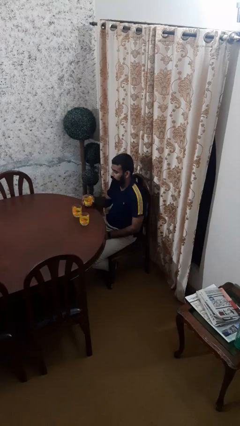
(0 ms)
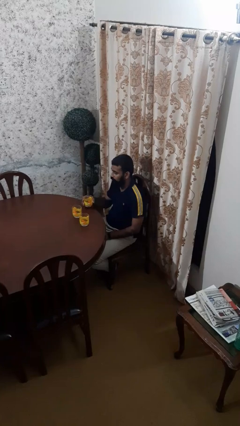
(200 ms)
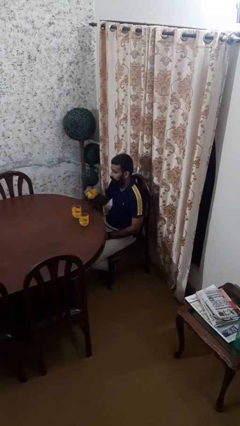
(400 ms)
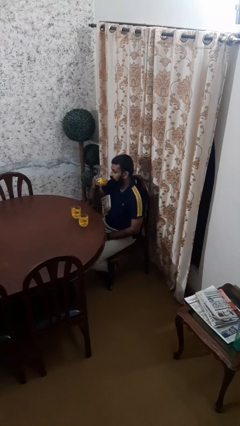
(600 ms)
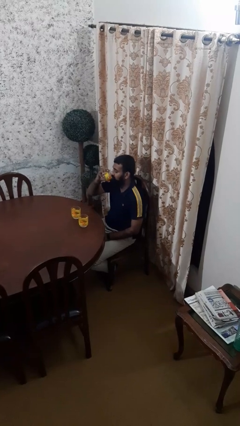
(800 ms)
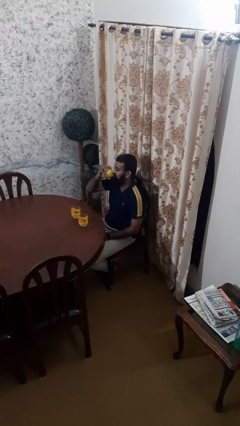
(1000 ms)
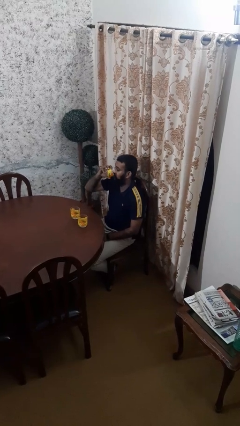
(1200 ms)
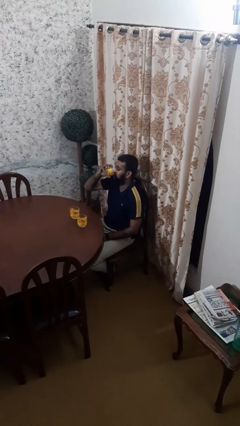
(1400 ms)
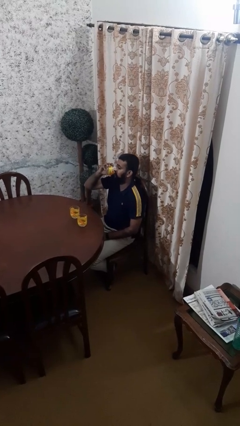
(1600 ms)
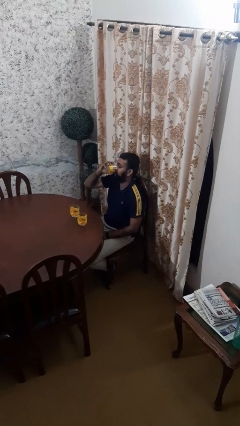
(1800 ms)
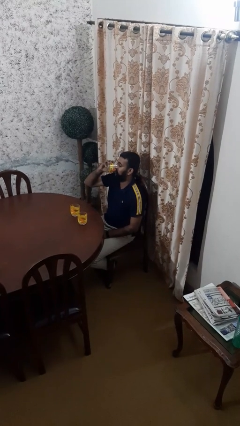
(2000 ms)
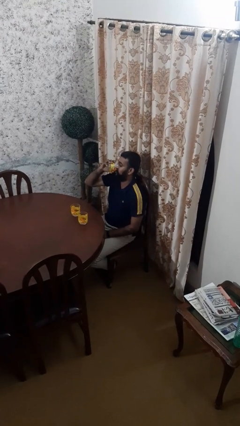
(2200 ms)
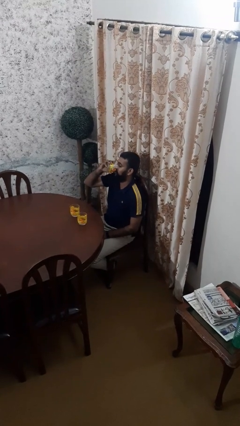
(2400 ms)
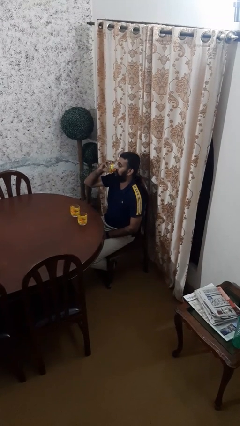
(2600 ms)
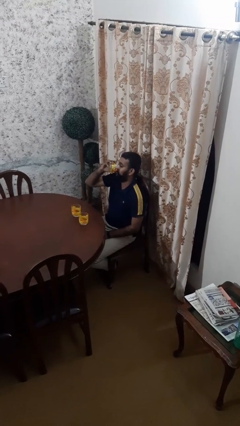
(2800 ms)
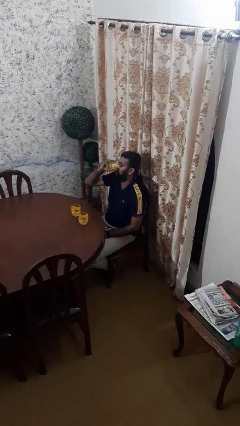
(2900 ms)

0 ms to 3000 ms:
person drinks from shotglass

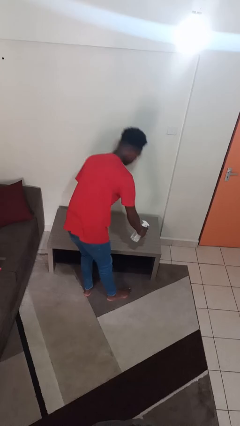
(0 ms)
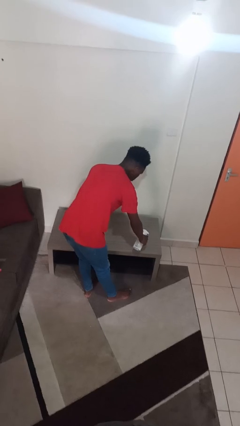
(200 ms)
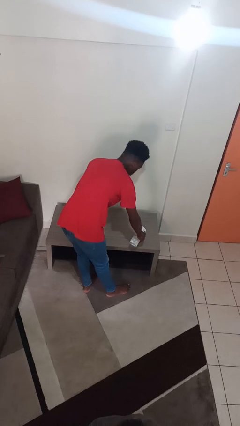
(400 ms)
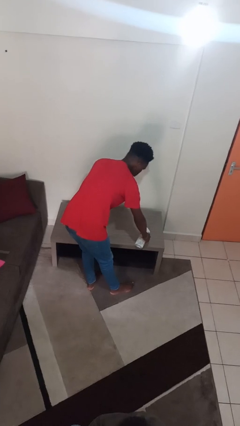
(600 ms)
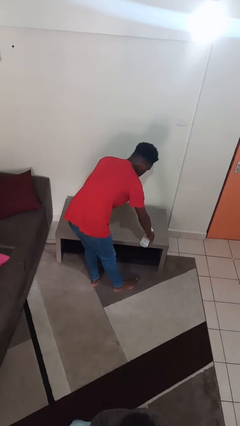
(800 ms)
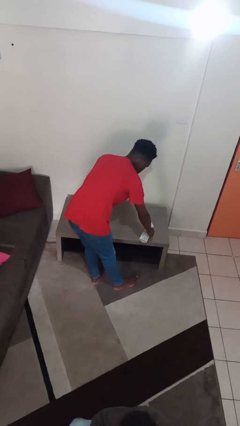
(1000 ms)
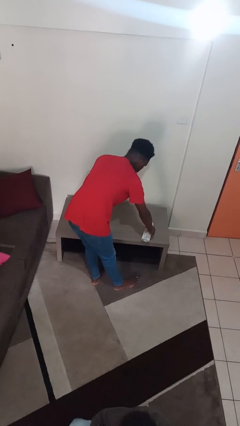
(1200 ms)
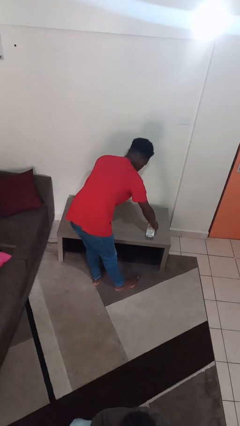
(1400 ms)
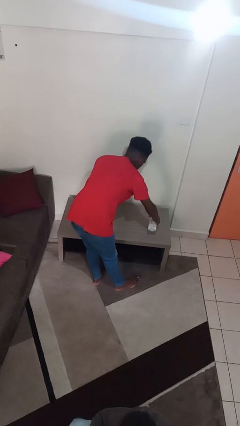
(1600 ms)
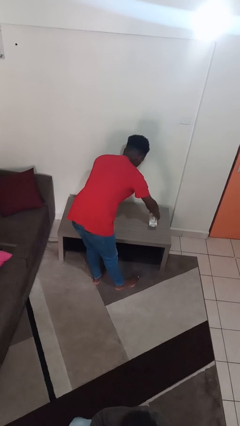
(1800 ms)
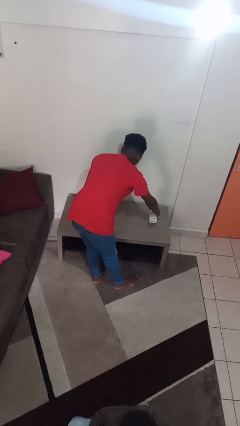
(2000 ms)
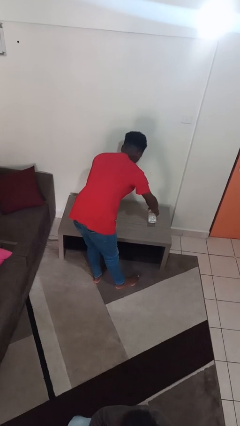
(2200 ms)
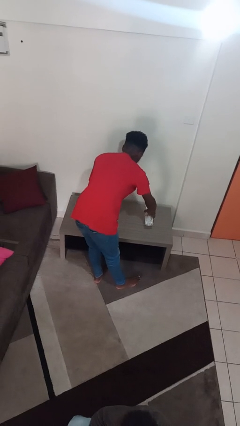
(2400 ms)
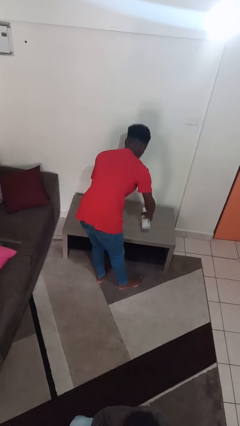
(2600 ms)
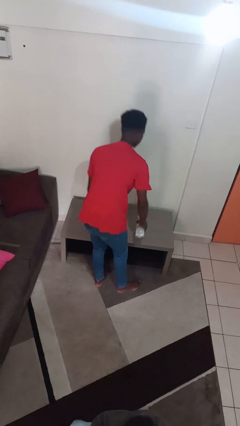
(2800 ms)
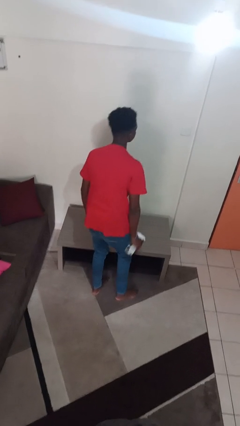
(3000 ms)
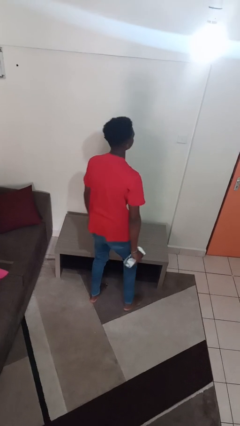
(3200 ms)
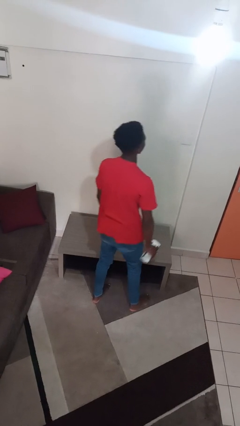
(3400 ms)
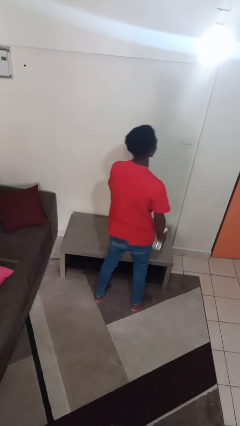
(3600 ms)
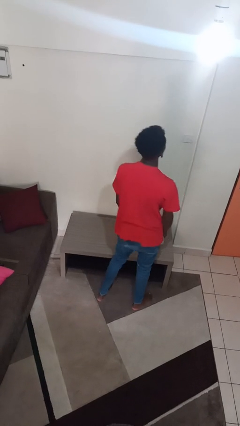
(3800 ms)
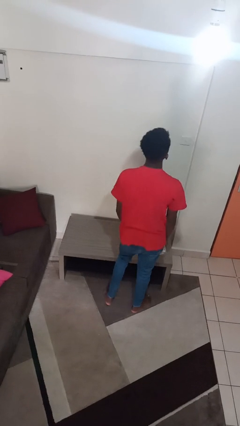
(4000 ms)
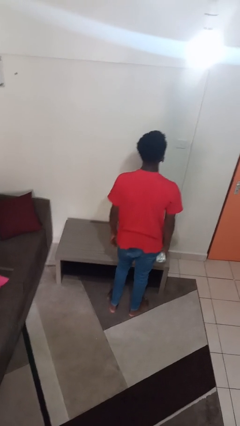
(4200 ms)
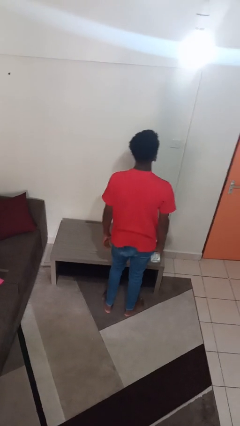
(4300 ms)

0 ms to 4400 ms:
person sprays from bottle

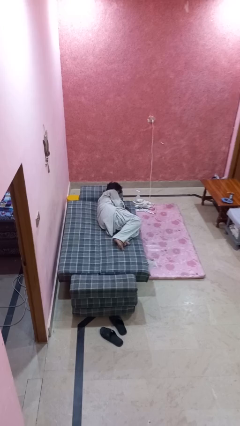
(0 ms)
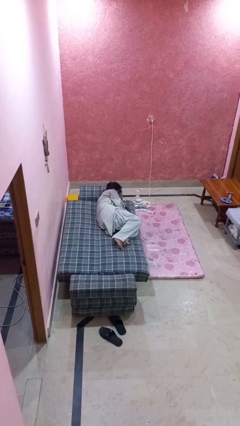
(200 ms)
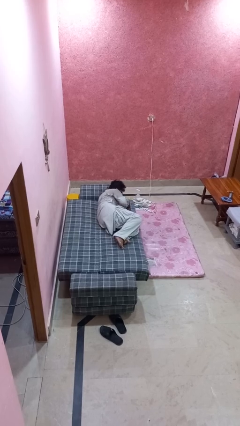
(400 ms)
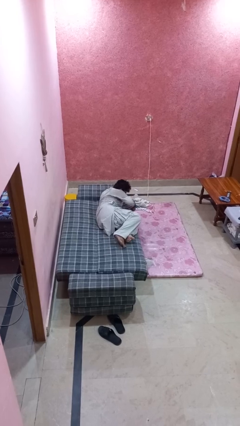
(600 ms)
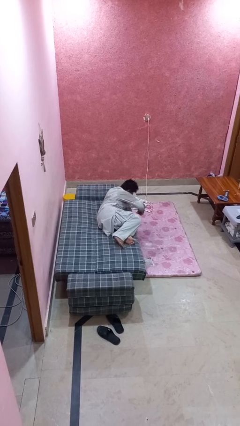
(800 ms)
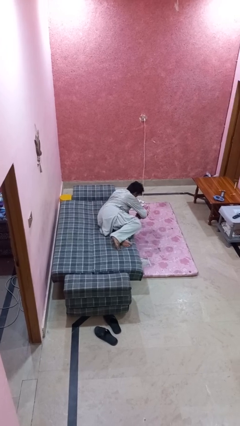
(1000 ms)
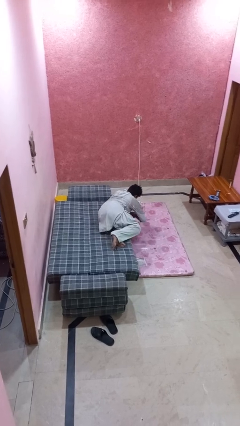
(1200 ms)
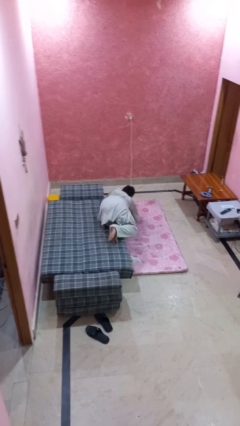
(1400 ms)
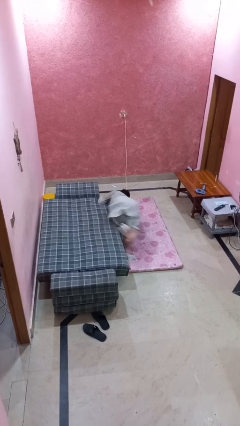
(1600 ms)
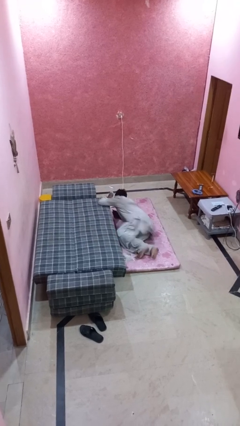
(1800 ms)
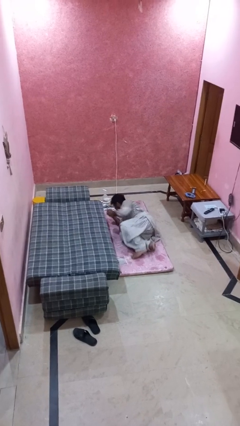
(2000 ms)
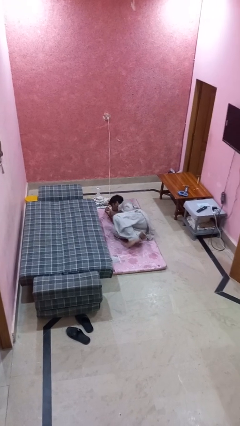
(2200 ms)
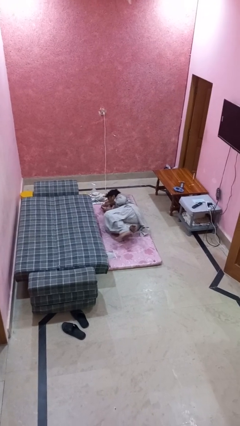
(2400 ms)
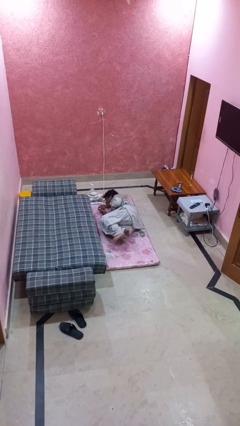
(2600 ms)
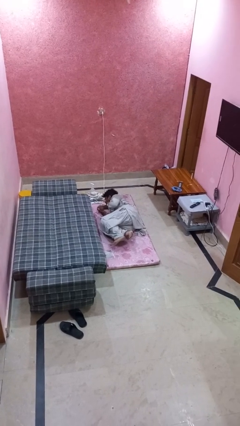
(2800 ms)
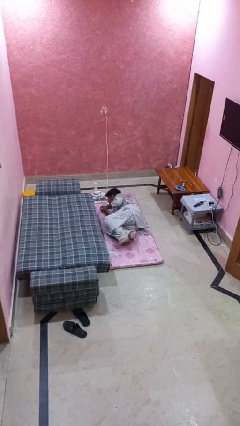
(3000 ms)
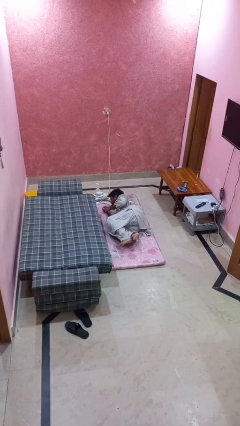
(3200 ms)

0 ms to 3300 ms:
person falls from bed

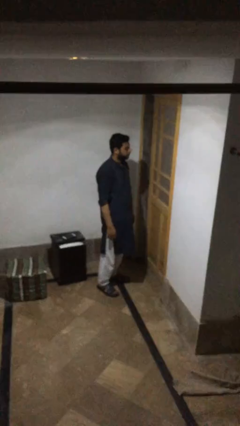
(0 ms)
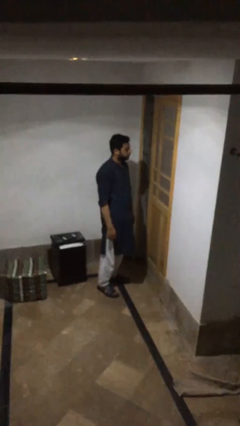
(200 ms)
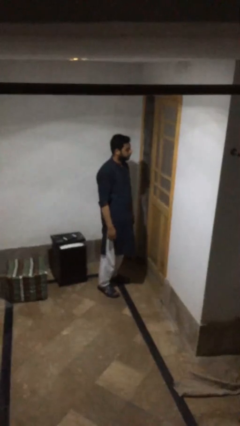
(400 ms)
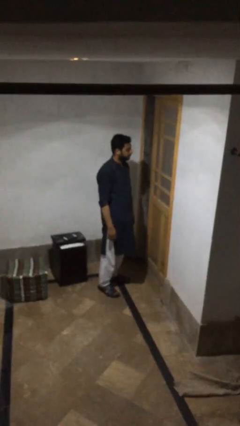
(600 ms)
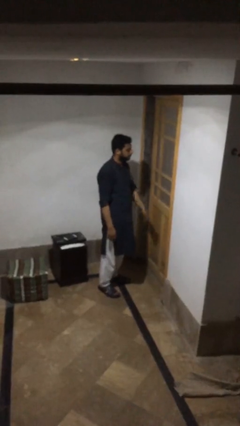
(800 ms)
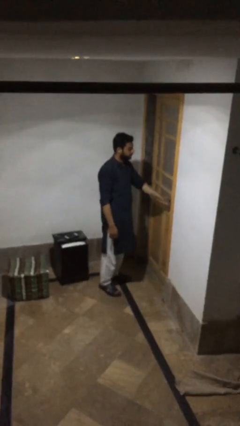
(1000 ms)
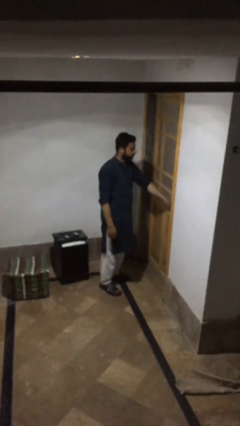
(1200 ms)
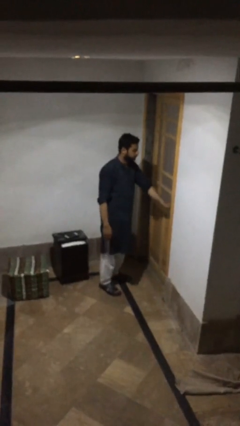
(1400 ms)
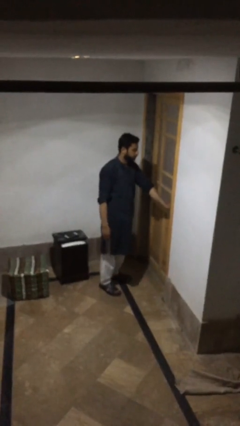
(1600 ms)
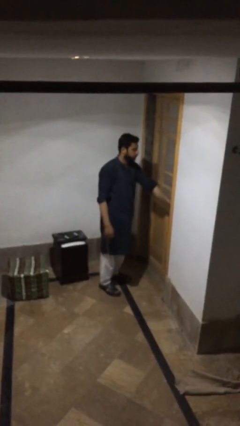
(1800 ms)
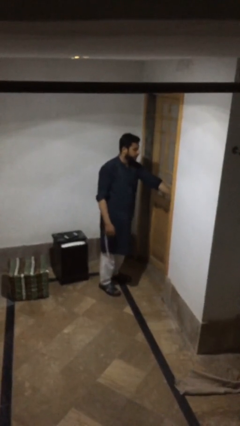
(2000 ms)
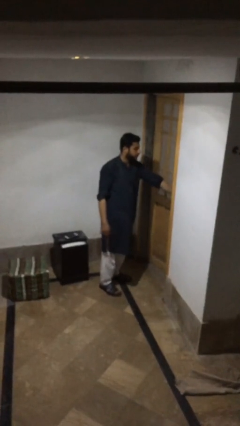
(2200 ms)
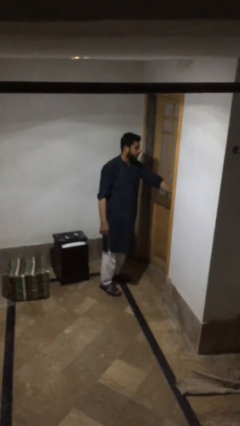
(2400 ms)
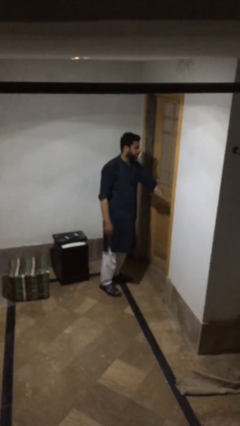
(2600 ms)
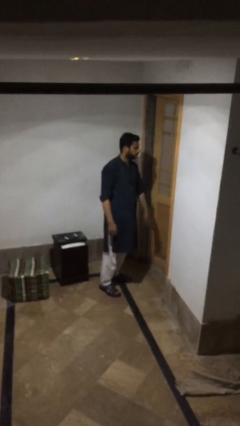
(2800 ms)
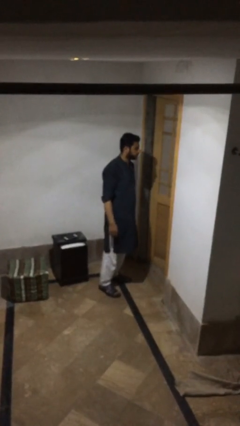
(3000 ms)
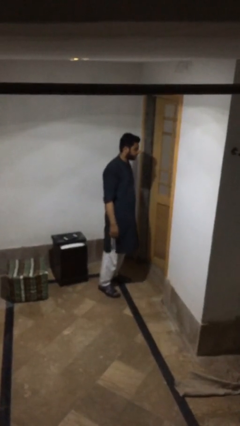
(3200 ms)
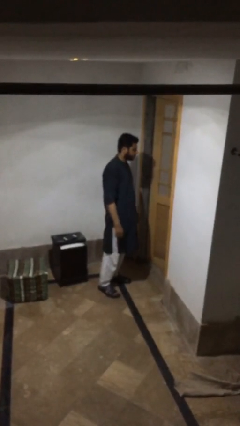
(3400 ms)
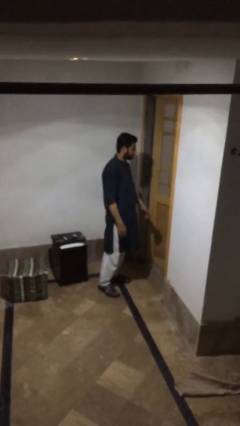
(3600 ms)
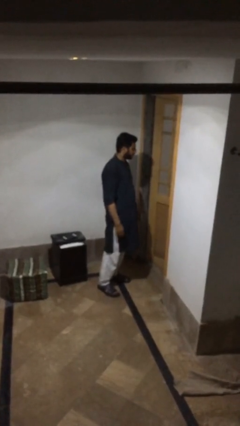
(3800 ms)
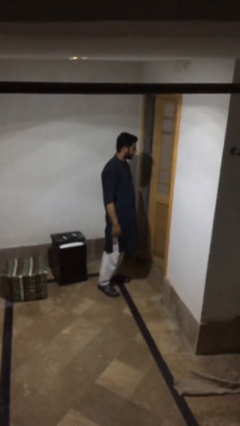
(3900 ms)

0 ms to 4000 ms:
person opens facility door

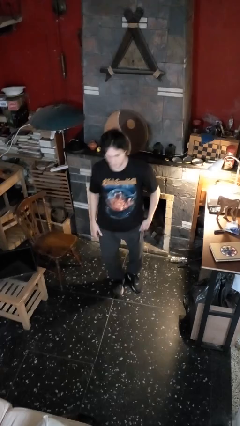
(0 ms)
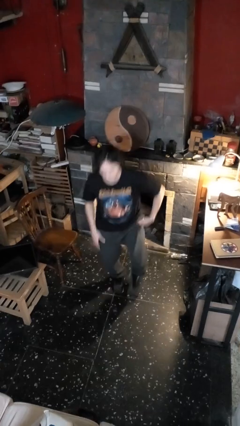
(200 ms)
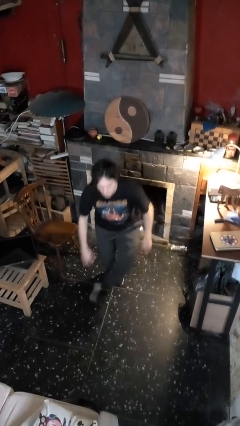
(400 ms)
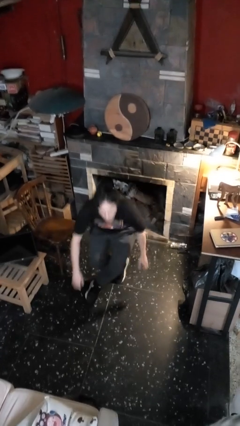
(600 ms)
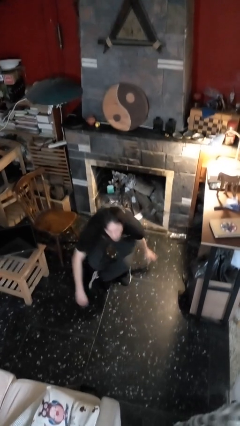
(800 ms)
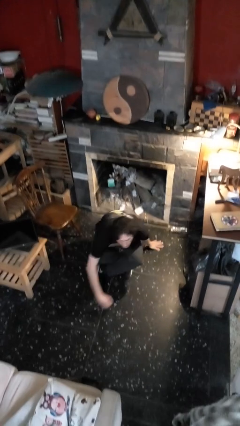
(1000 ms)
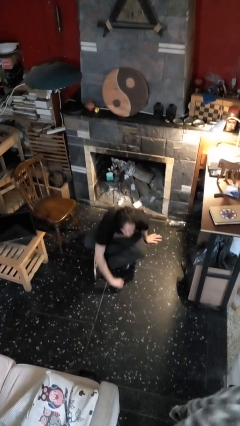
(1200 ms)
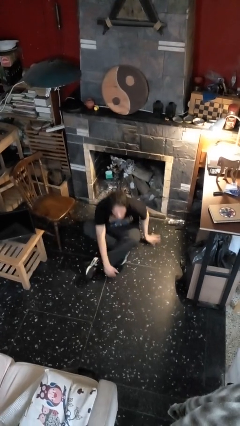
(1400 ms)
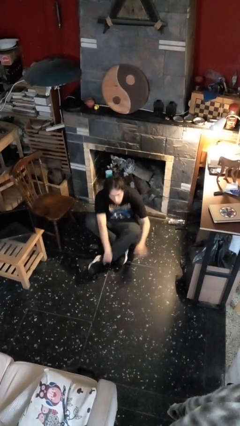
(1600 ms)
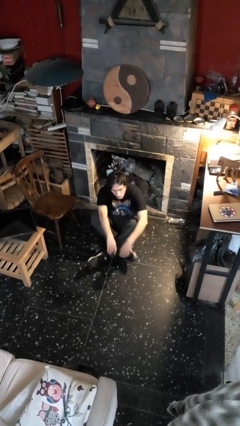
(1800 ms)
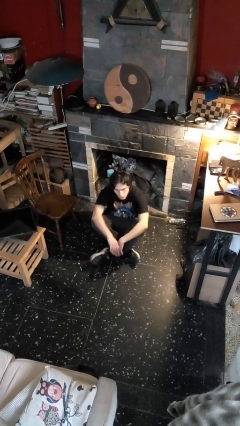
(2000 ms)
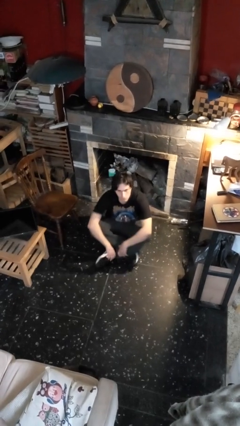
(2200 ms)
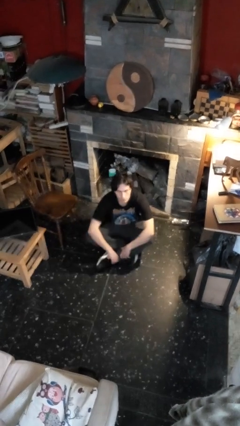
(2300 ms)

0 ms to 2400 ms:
person sits crisscross

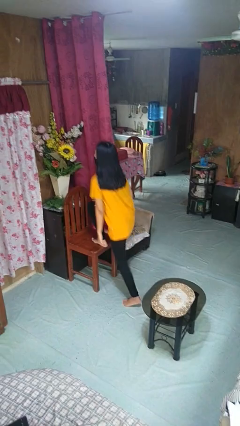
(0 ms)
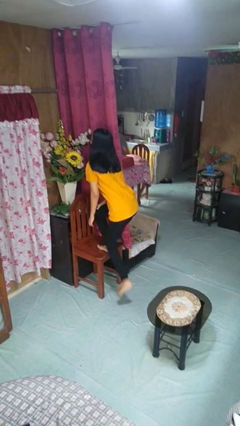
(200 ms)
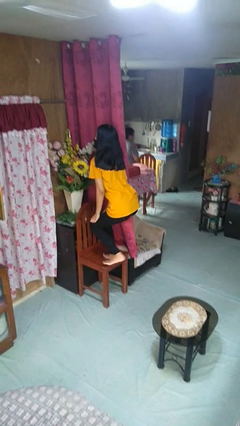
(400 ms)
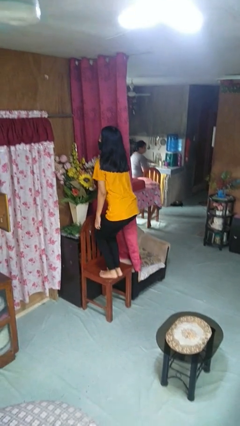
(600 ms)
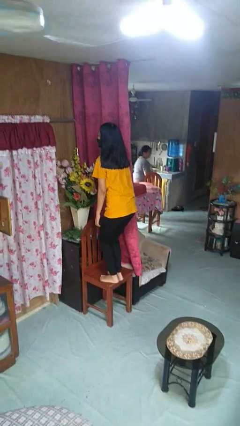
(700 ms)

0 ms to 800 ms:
person climbs on chair
